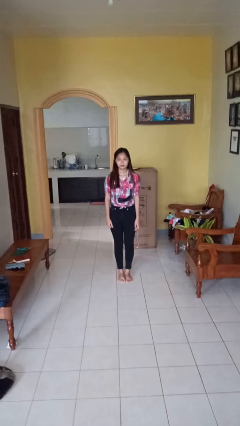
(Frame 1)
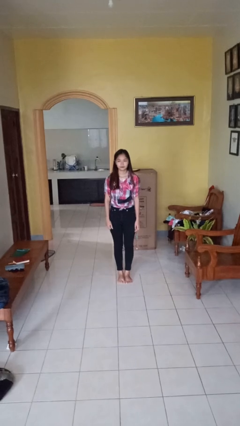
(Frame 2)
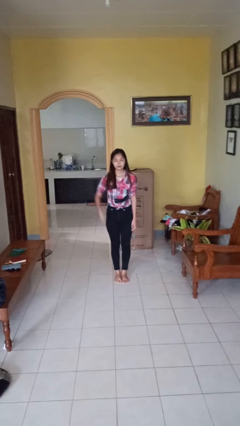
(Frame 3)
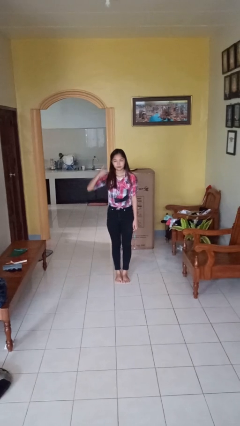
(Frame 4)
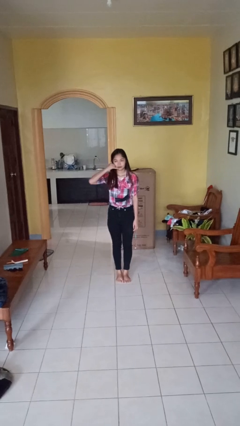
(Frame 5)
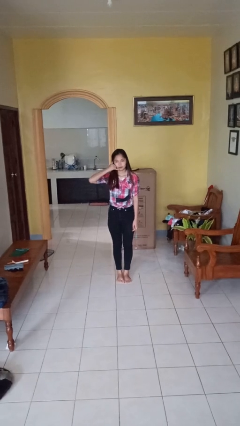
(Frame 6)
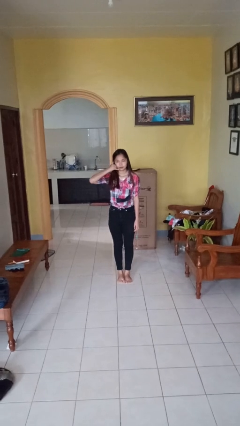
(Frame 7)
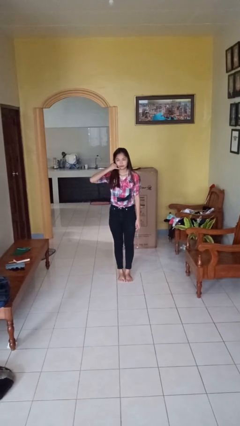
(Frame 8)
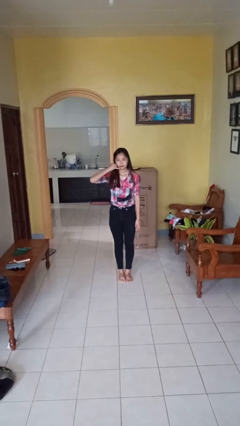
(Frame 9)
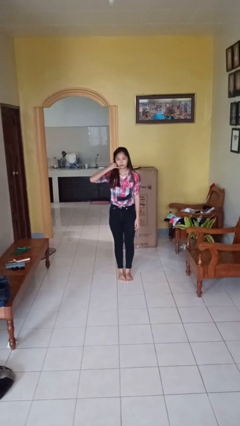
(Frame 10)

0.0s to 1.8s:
person gestures call me

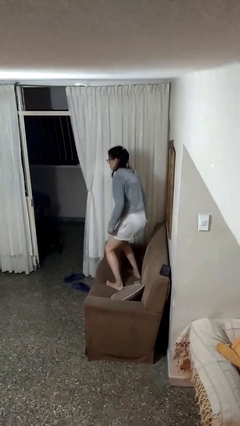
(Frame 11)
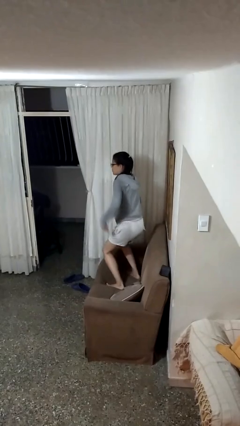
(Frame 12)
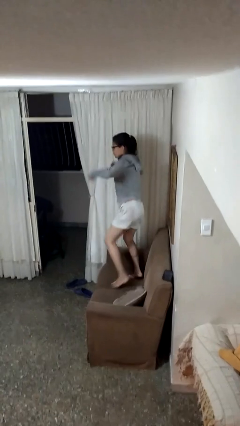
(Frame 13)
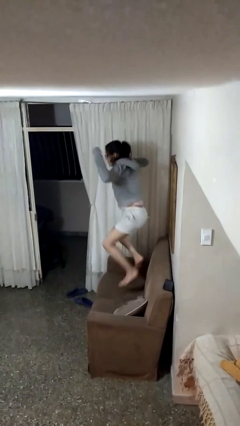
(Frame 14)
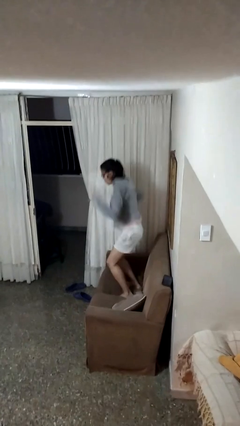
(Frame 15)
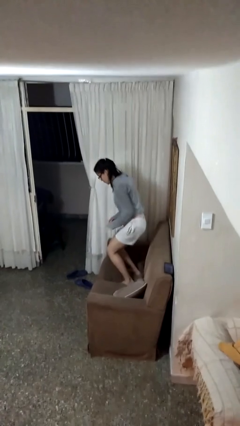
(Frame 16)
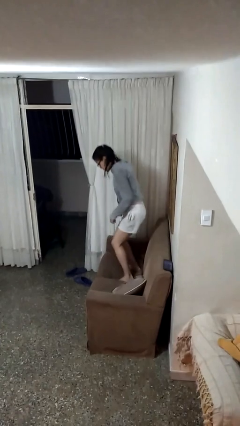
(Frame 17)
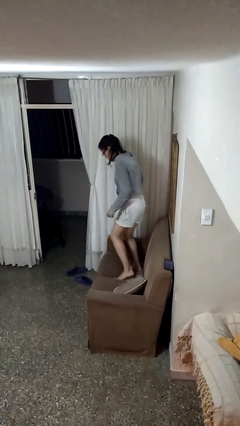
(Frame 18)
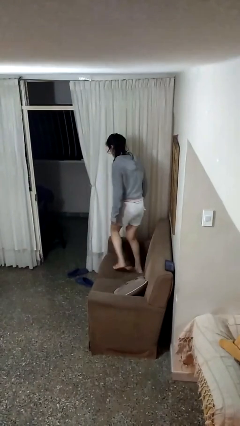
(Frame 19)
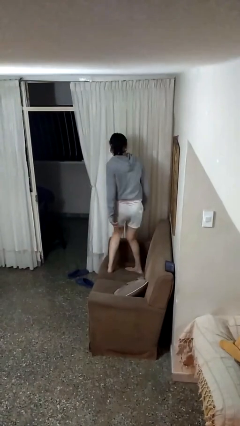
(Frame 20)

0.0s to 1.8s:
person jumps on couch

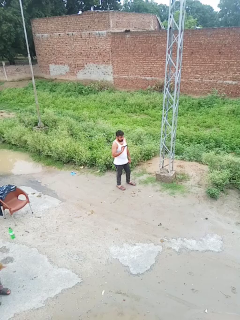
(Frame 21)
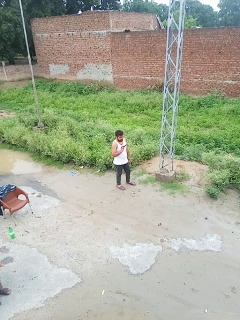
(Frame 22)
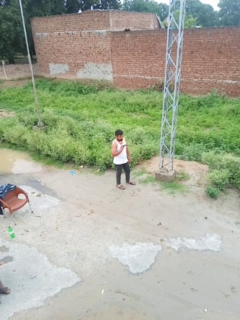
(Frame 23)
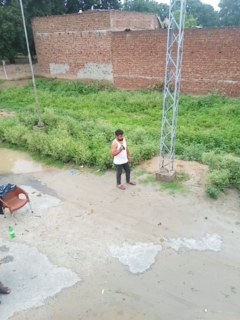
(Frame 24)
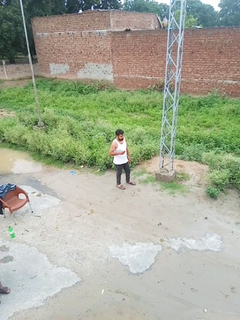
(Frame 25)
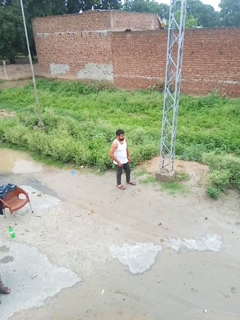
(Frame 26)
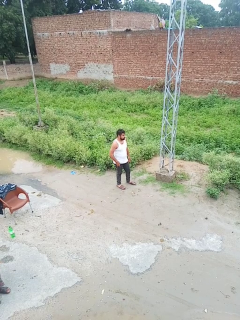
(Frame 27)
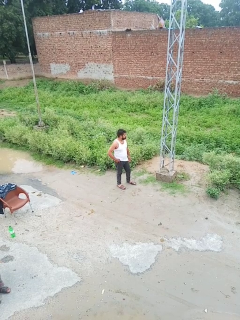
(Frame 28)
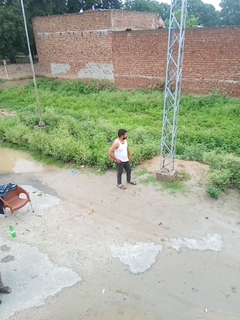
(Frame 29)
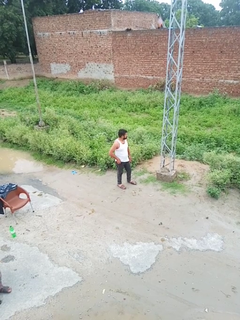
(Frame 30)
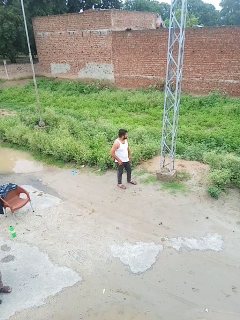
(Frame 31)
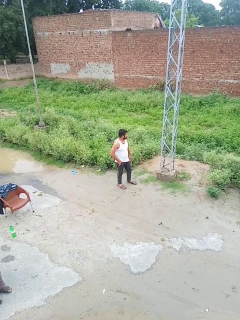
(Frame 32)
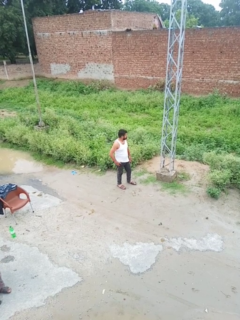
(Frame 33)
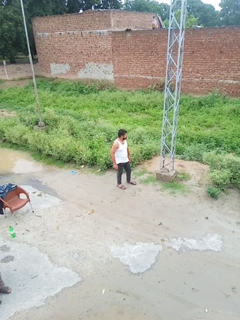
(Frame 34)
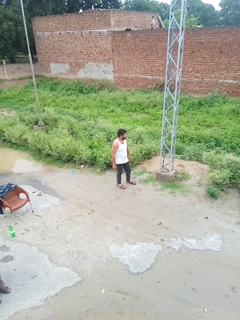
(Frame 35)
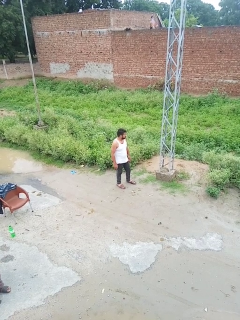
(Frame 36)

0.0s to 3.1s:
person puts phone into pocket

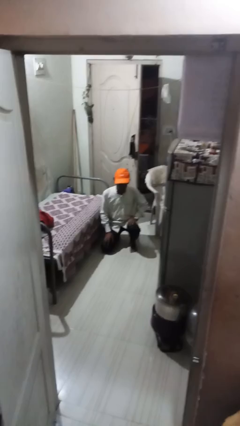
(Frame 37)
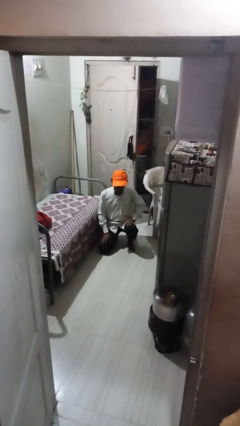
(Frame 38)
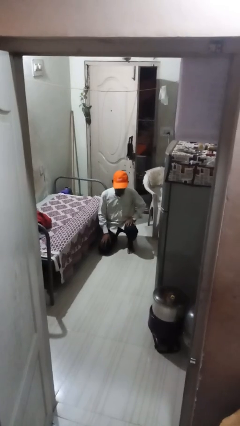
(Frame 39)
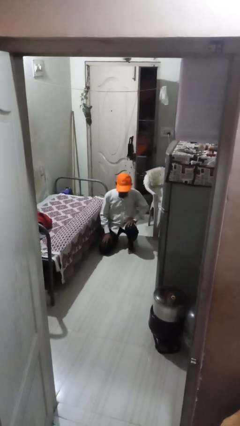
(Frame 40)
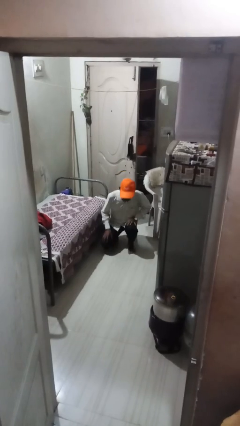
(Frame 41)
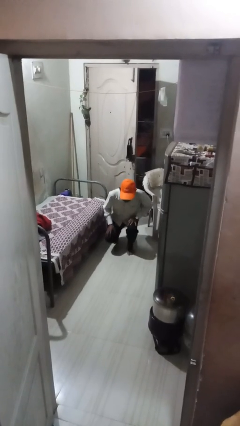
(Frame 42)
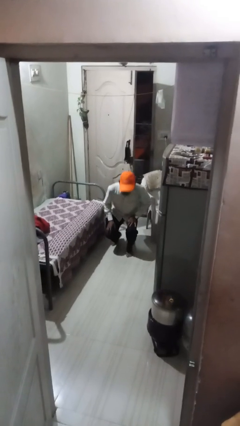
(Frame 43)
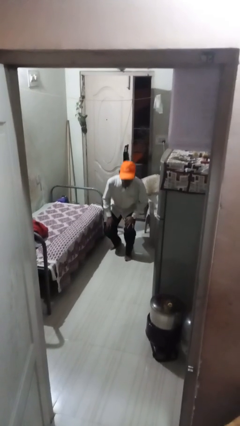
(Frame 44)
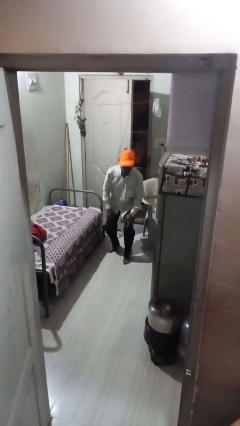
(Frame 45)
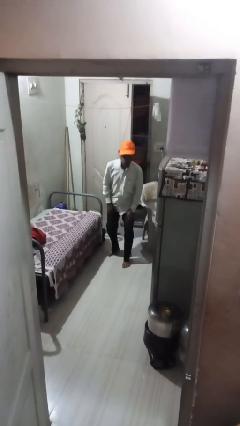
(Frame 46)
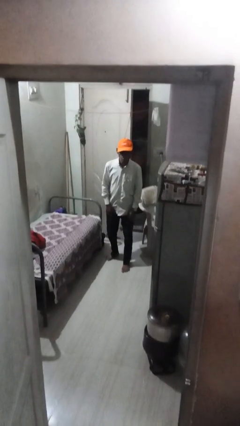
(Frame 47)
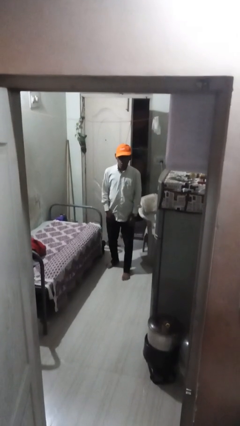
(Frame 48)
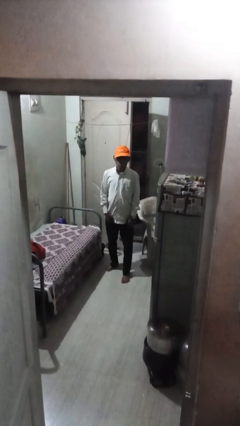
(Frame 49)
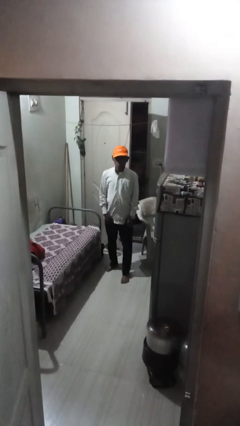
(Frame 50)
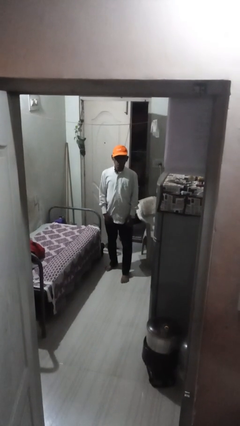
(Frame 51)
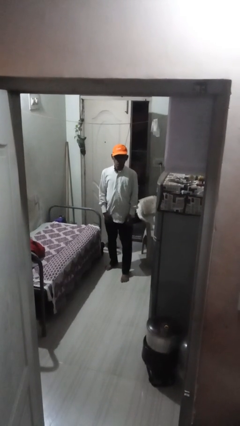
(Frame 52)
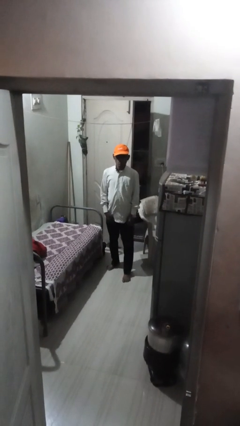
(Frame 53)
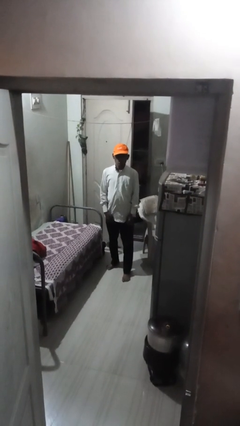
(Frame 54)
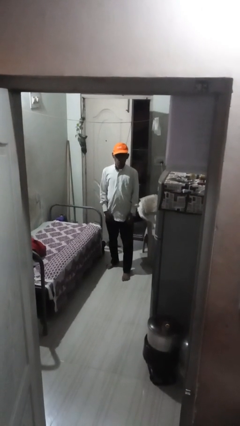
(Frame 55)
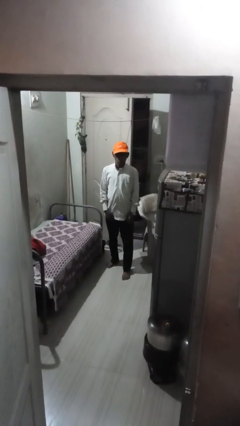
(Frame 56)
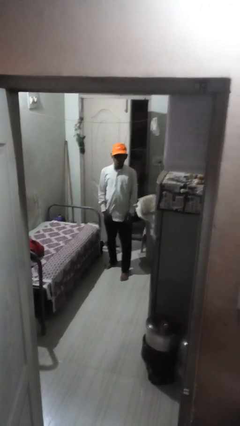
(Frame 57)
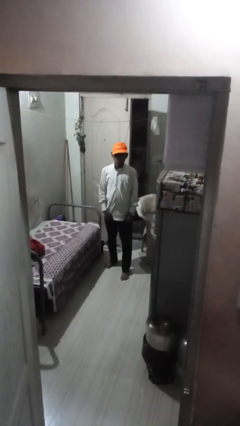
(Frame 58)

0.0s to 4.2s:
person stands up from floor

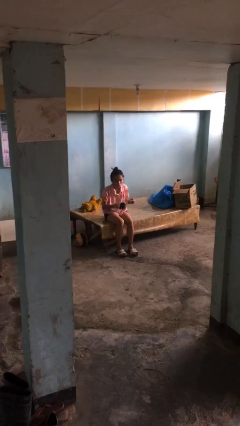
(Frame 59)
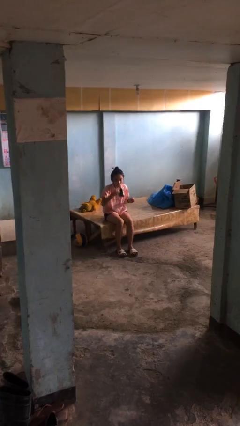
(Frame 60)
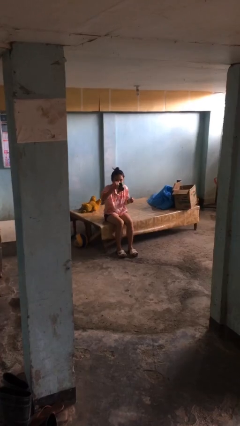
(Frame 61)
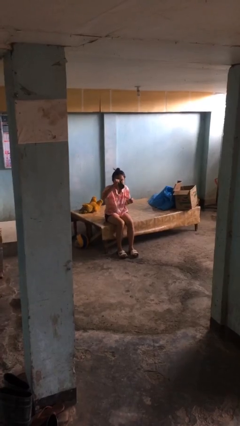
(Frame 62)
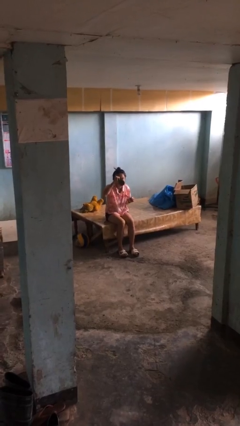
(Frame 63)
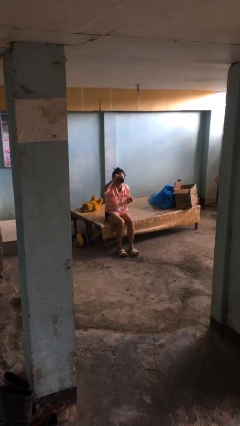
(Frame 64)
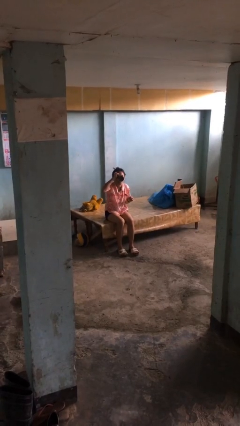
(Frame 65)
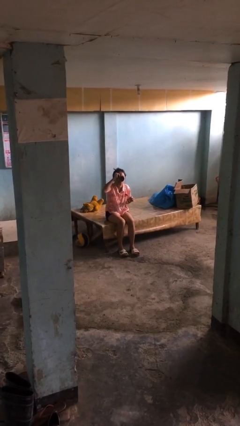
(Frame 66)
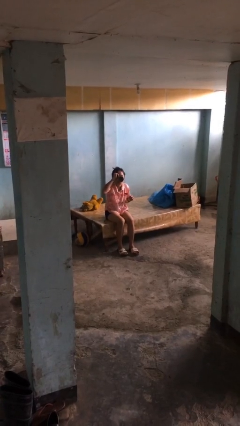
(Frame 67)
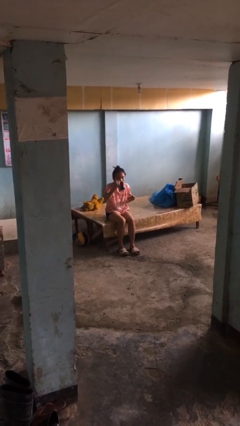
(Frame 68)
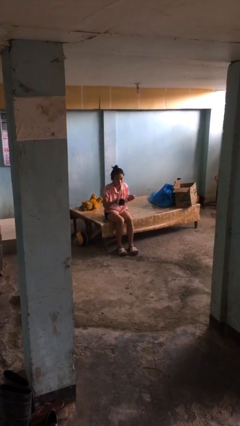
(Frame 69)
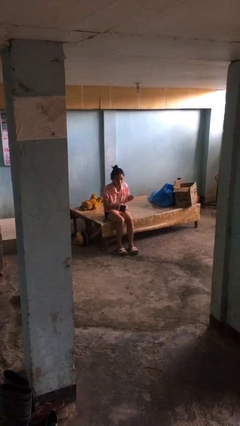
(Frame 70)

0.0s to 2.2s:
person drinks from mug

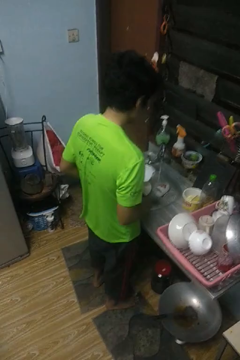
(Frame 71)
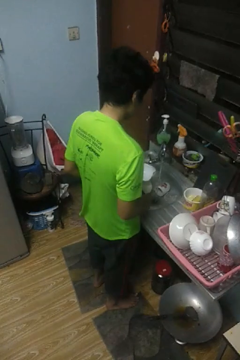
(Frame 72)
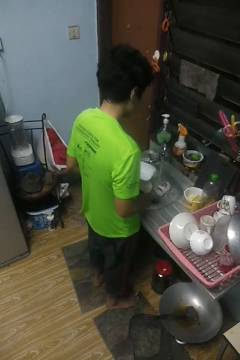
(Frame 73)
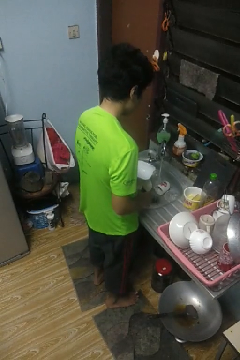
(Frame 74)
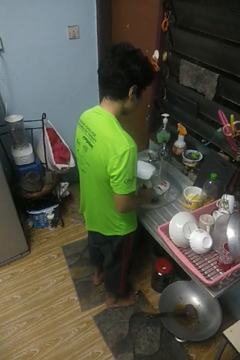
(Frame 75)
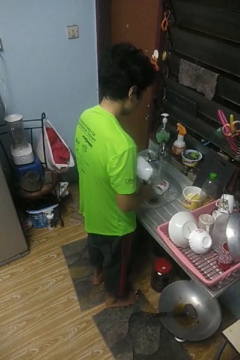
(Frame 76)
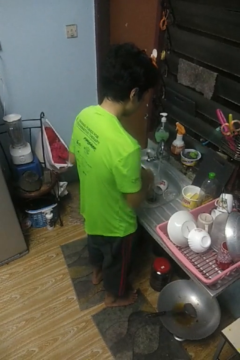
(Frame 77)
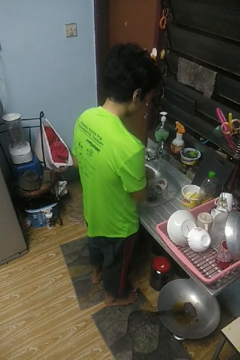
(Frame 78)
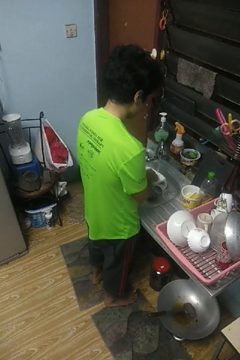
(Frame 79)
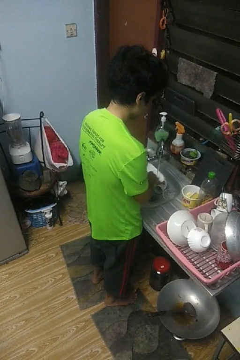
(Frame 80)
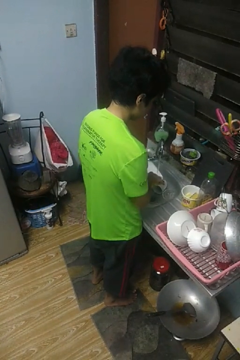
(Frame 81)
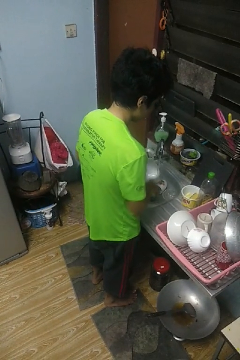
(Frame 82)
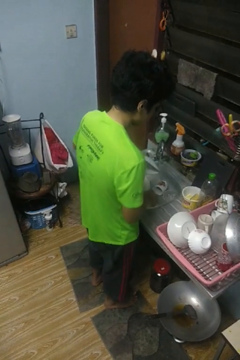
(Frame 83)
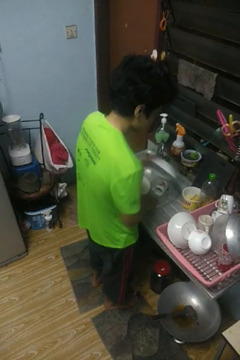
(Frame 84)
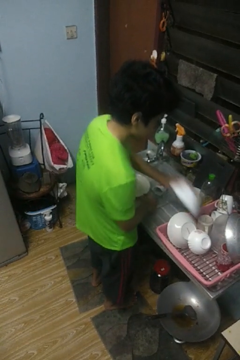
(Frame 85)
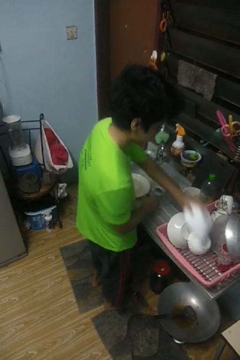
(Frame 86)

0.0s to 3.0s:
person washes dish

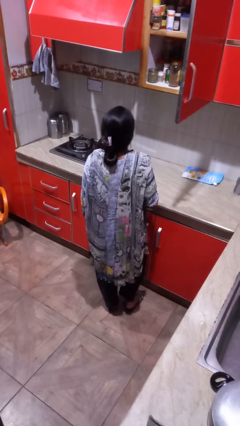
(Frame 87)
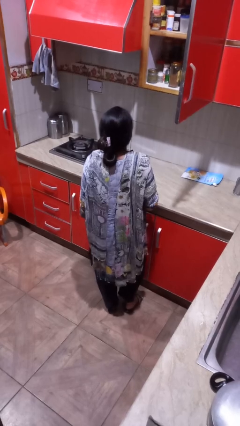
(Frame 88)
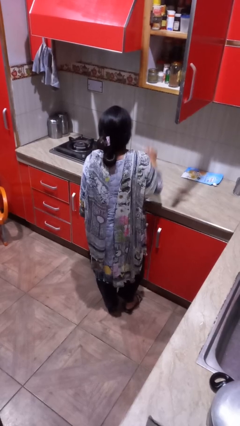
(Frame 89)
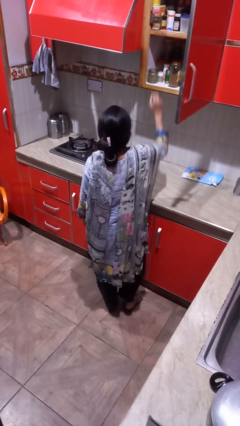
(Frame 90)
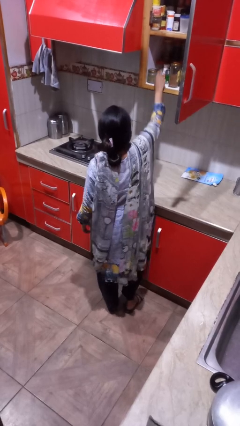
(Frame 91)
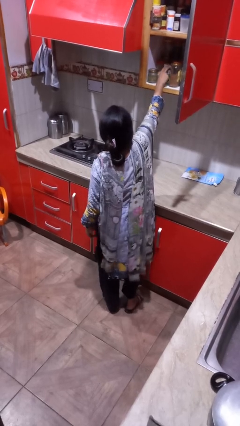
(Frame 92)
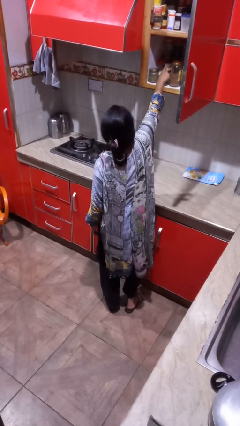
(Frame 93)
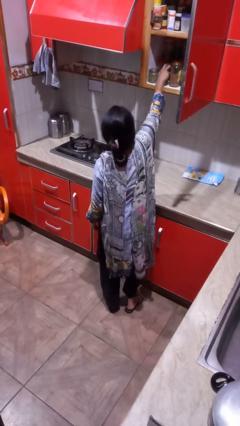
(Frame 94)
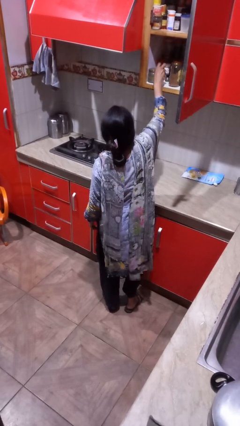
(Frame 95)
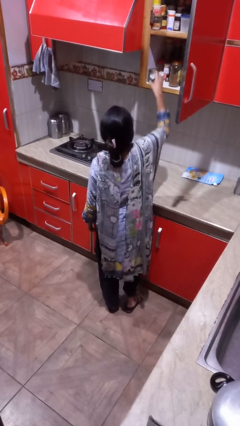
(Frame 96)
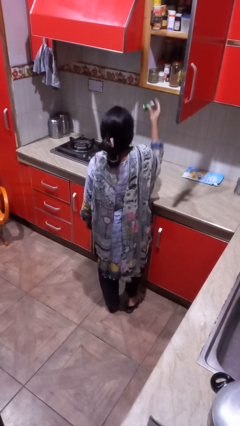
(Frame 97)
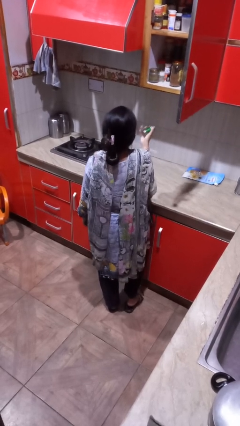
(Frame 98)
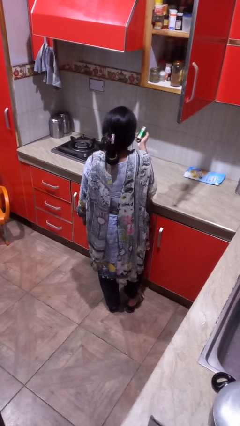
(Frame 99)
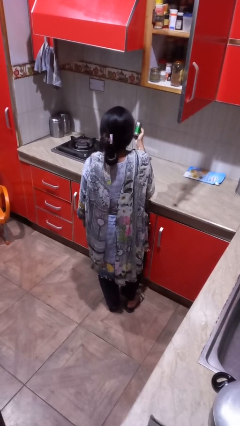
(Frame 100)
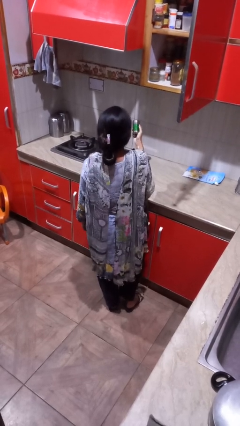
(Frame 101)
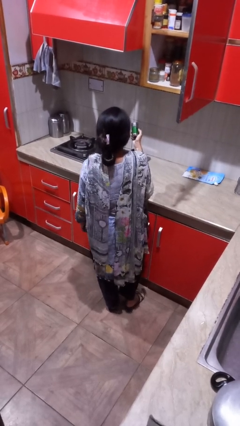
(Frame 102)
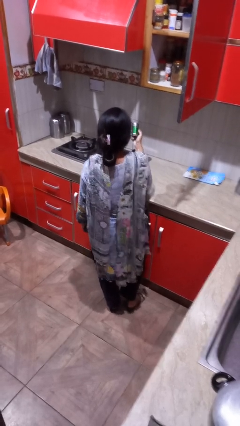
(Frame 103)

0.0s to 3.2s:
person takes object from cabinet
